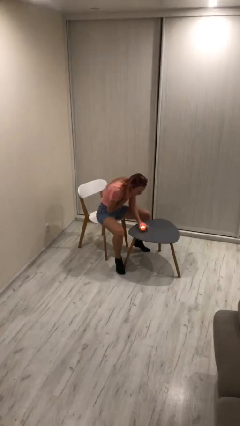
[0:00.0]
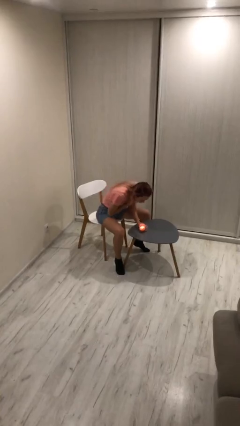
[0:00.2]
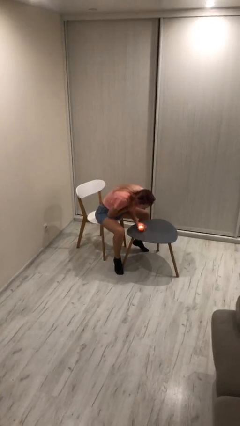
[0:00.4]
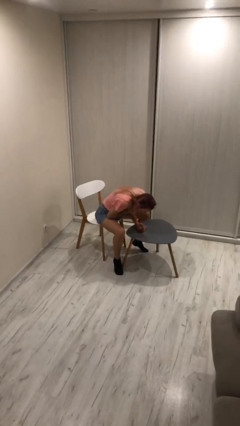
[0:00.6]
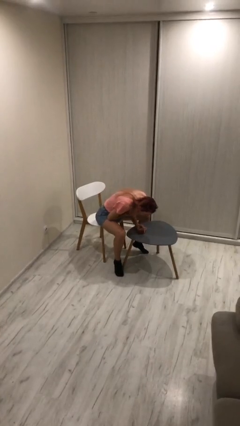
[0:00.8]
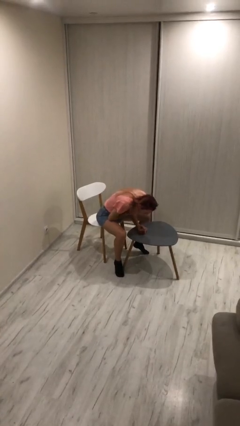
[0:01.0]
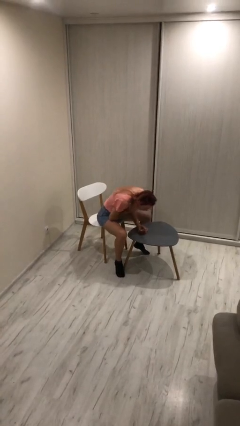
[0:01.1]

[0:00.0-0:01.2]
person extinguishes candle

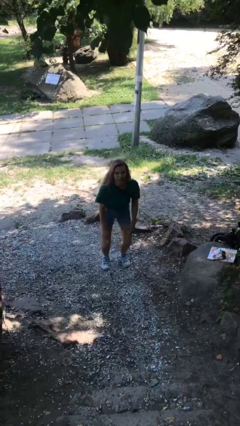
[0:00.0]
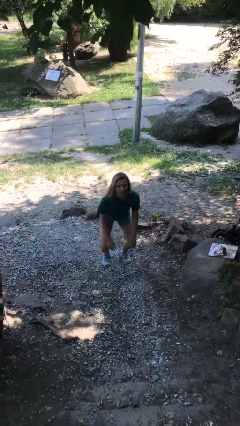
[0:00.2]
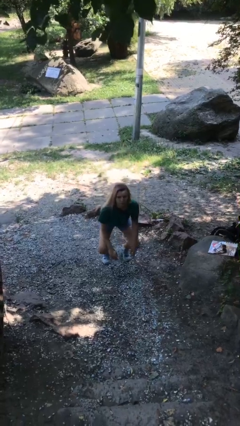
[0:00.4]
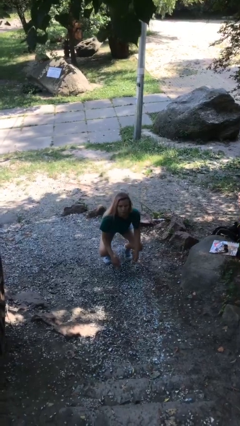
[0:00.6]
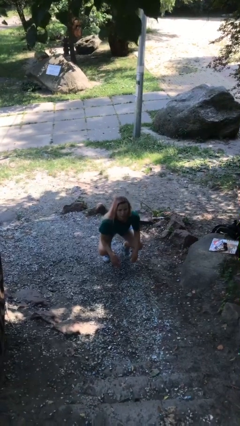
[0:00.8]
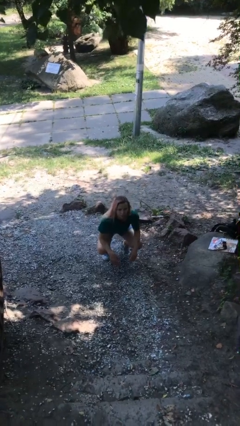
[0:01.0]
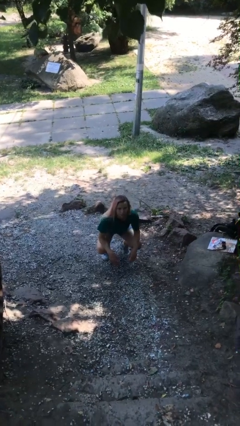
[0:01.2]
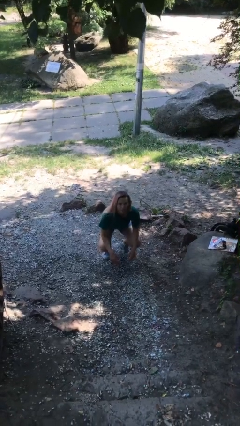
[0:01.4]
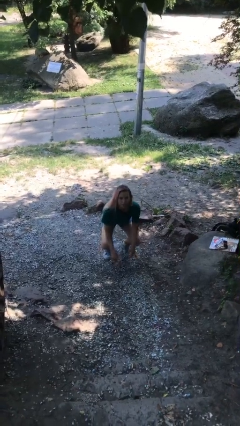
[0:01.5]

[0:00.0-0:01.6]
person squats

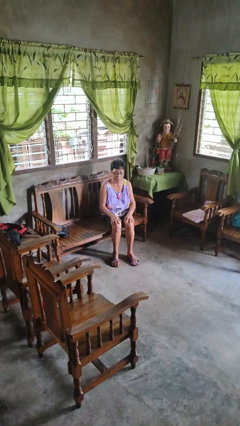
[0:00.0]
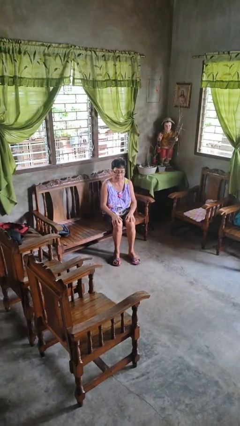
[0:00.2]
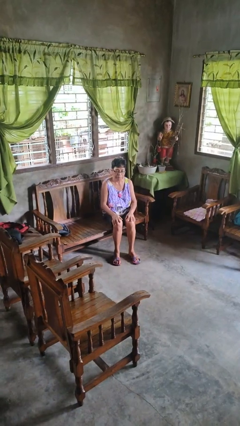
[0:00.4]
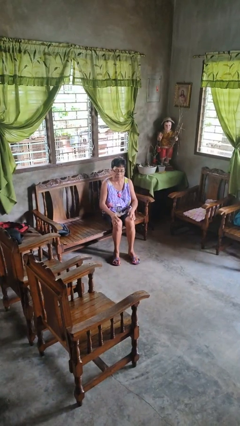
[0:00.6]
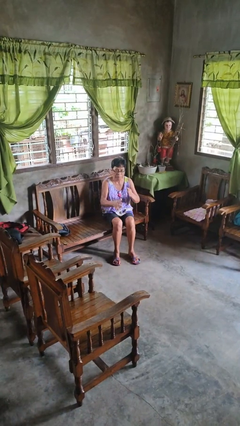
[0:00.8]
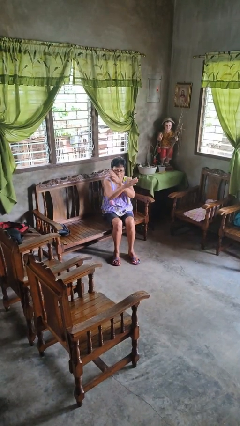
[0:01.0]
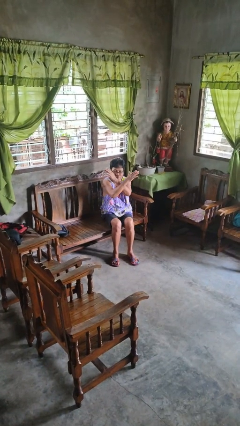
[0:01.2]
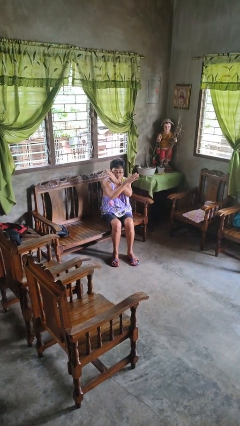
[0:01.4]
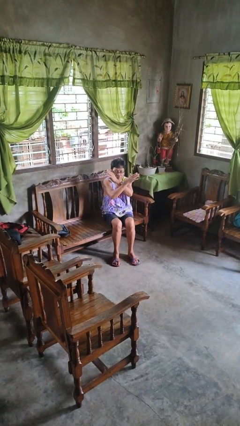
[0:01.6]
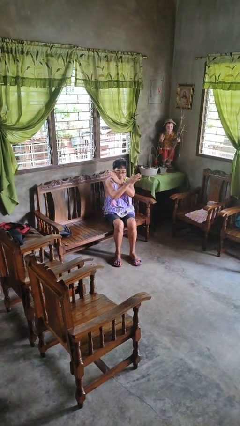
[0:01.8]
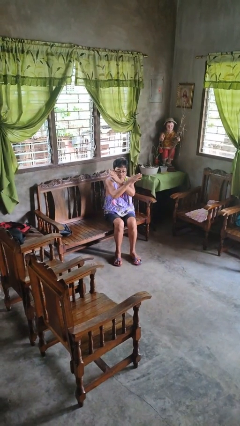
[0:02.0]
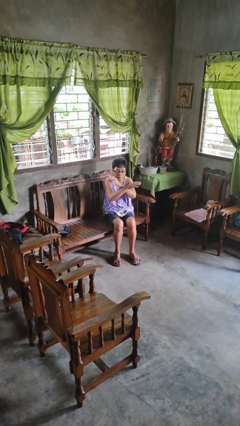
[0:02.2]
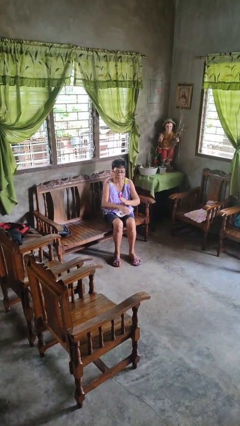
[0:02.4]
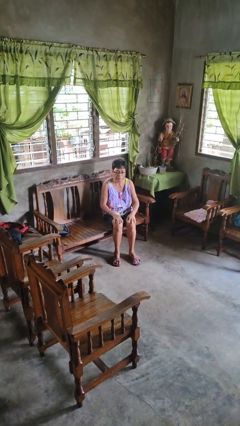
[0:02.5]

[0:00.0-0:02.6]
person gestures arms x

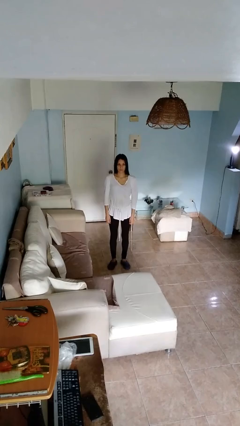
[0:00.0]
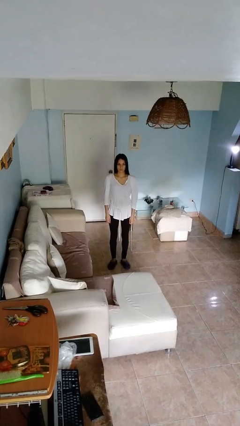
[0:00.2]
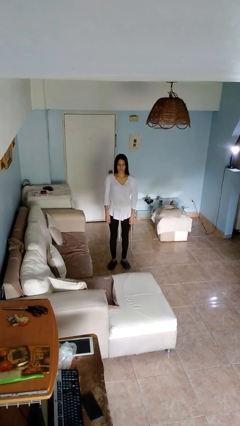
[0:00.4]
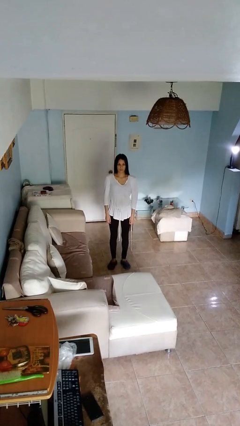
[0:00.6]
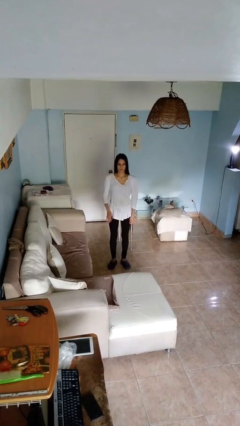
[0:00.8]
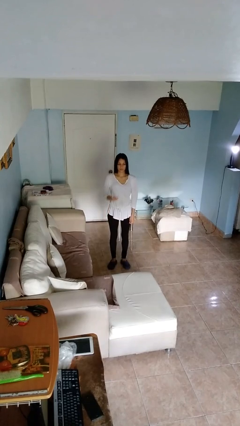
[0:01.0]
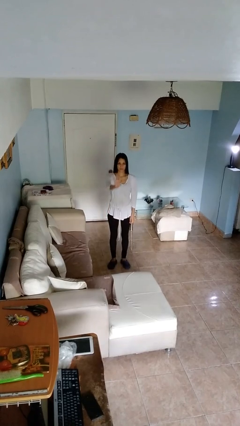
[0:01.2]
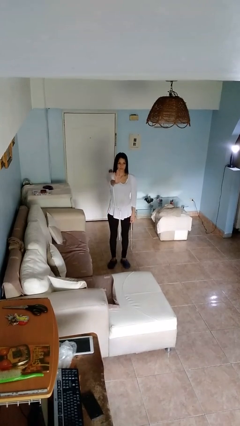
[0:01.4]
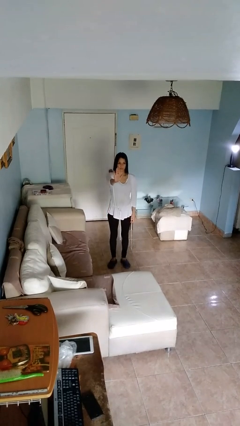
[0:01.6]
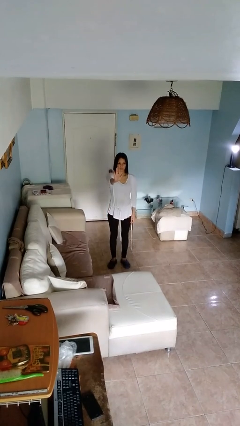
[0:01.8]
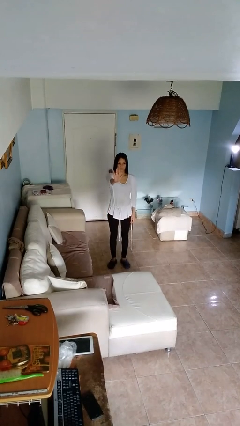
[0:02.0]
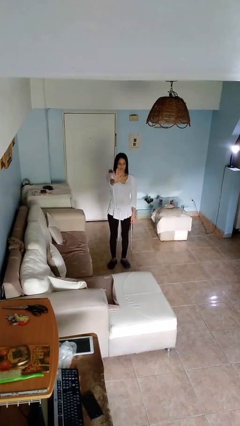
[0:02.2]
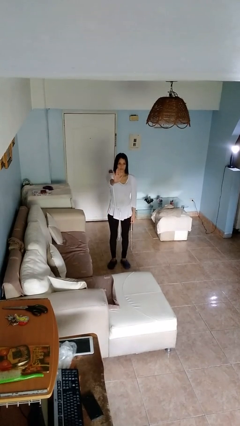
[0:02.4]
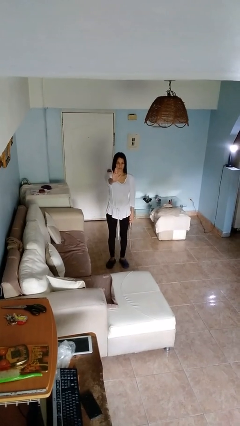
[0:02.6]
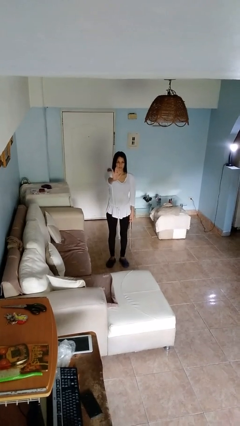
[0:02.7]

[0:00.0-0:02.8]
person gestures stop

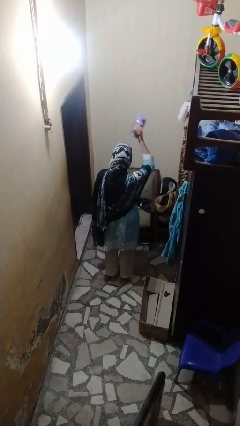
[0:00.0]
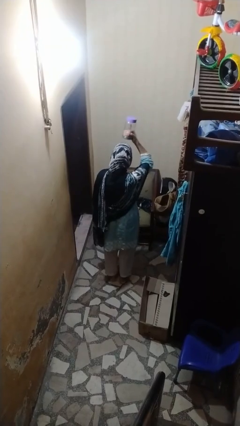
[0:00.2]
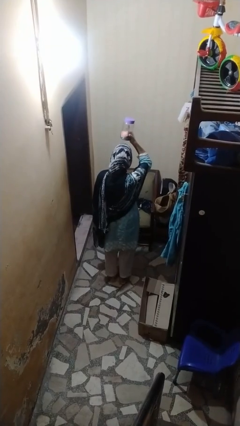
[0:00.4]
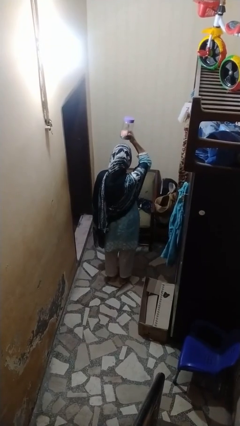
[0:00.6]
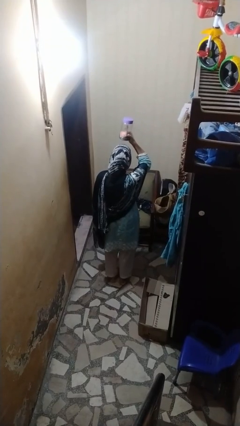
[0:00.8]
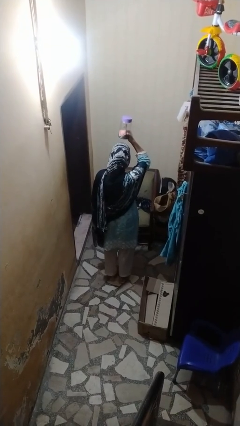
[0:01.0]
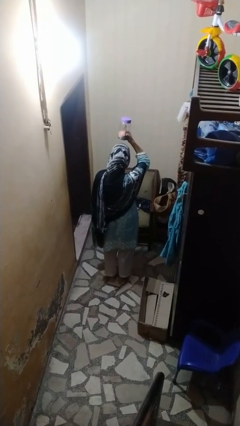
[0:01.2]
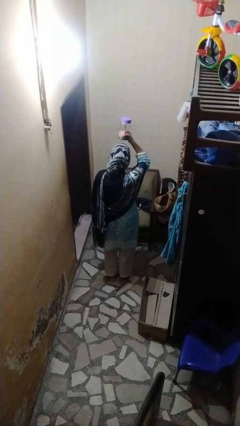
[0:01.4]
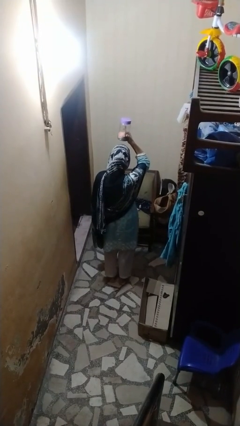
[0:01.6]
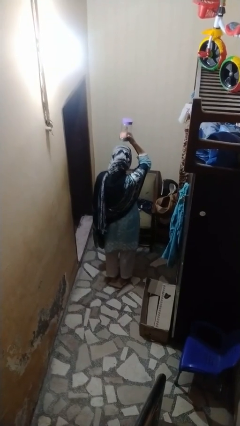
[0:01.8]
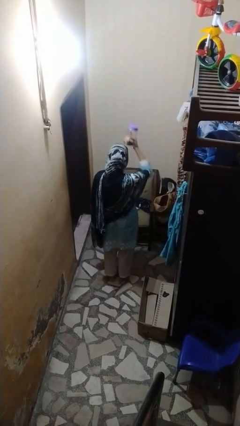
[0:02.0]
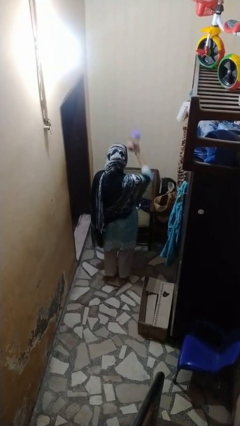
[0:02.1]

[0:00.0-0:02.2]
person holds object above head

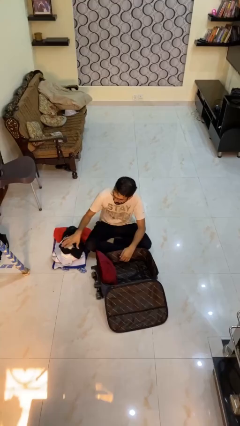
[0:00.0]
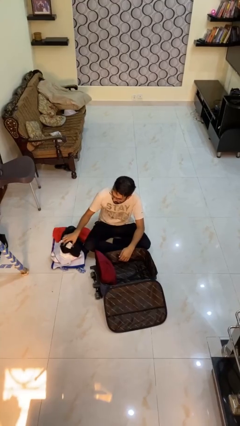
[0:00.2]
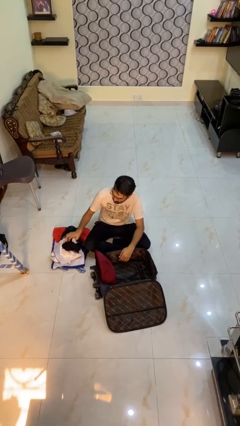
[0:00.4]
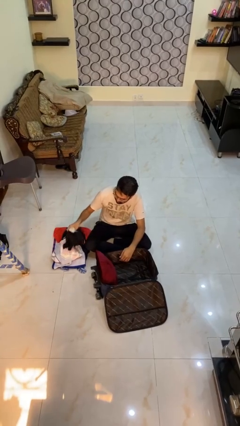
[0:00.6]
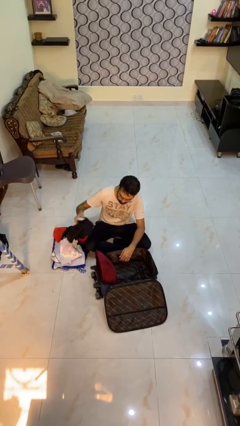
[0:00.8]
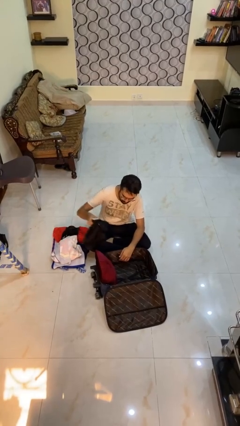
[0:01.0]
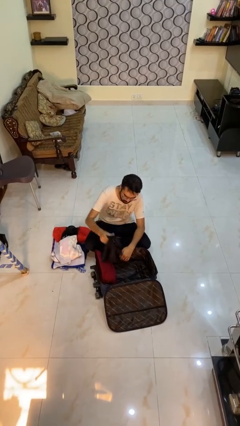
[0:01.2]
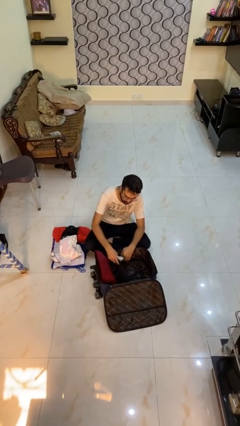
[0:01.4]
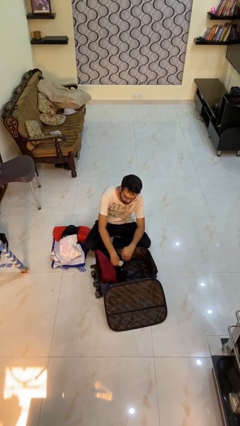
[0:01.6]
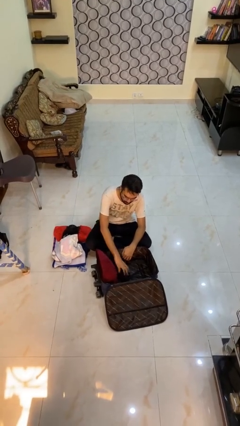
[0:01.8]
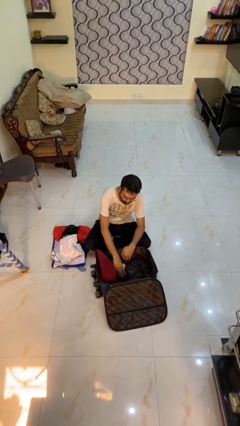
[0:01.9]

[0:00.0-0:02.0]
person loads clothes into suitcase

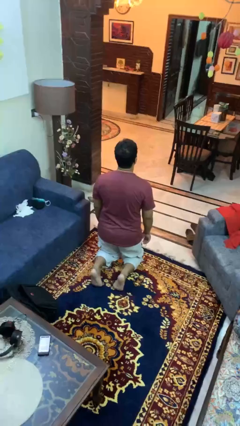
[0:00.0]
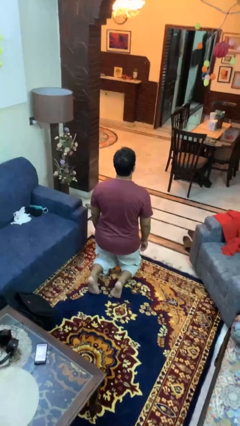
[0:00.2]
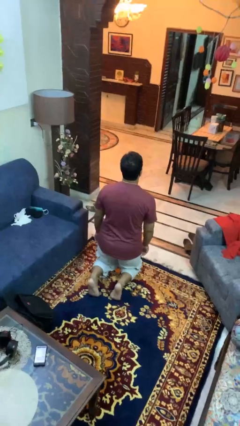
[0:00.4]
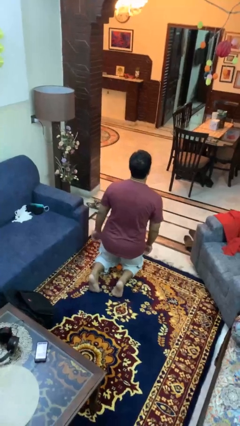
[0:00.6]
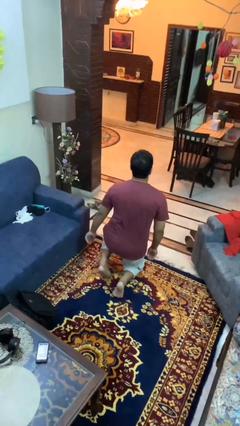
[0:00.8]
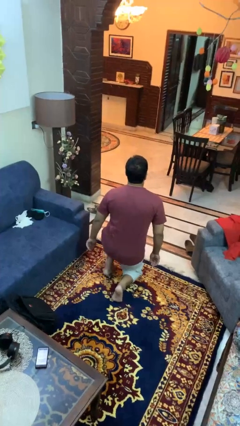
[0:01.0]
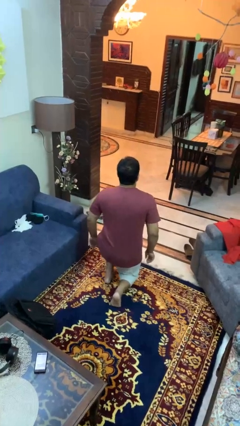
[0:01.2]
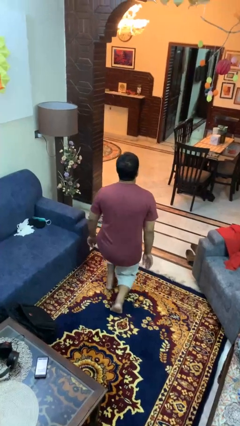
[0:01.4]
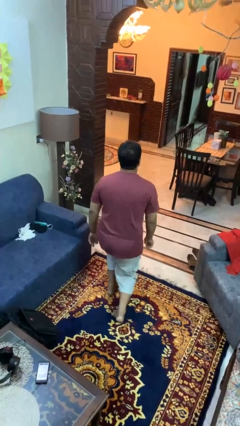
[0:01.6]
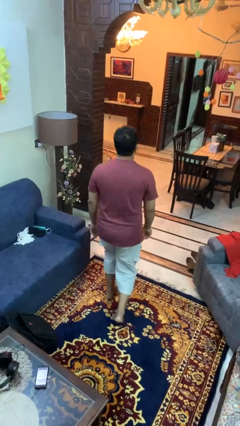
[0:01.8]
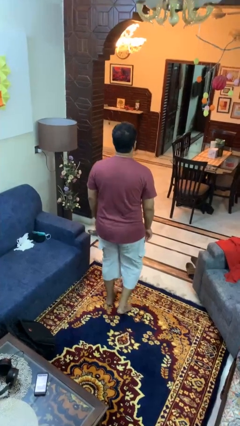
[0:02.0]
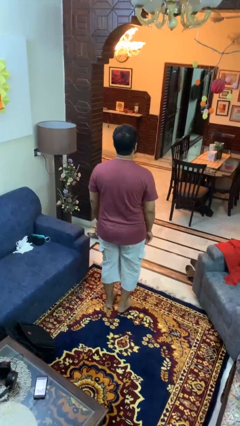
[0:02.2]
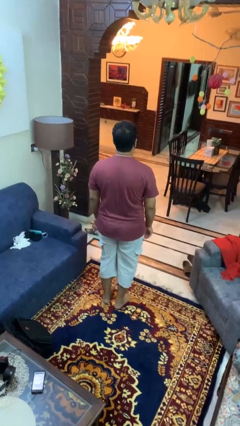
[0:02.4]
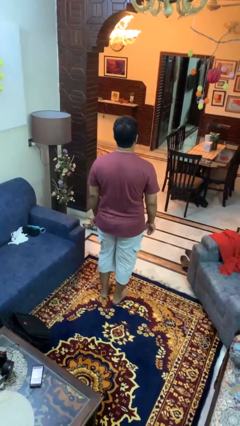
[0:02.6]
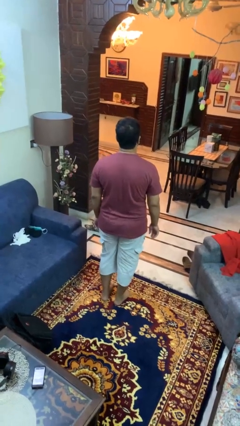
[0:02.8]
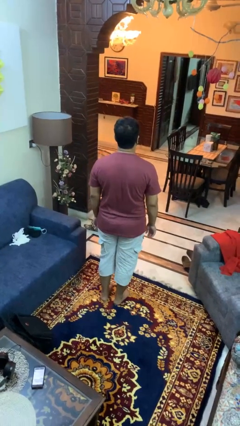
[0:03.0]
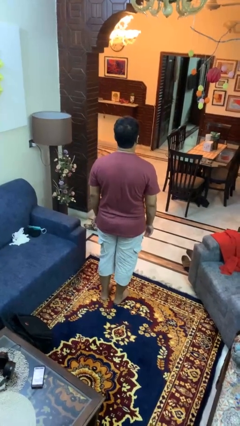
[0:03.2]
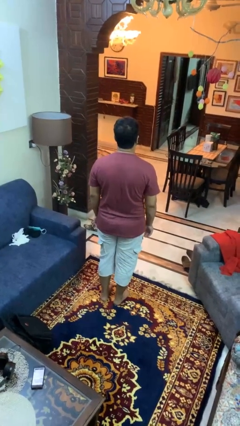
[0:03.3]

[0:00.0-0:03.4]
person stands up from floor

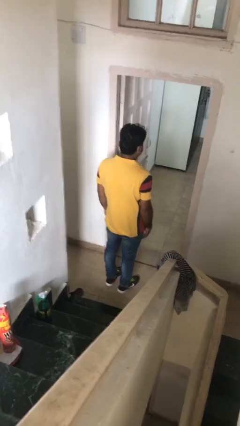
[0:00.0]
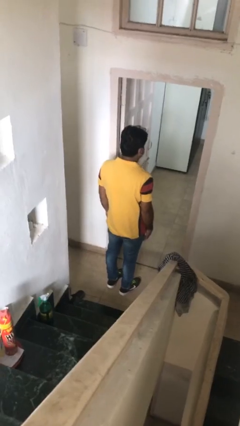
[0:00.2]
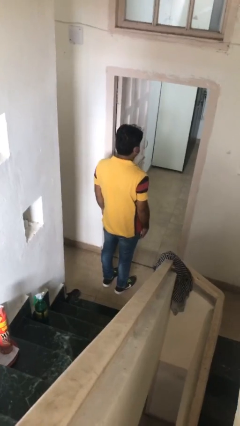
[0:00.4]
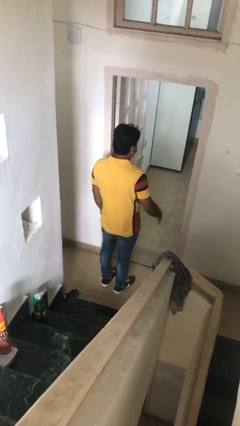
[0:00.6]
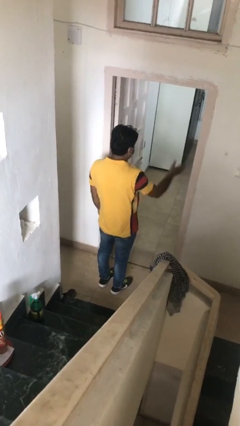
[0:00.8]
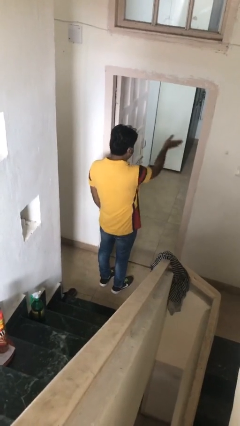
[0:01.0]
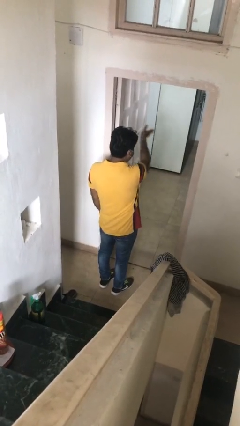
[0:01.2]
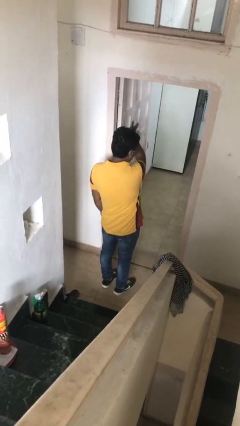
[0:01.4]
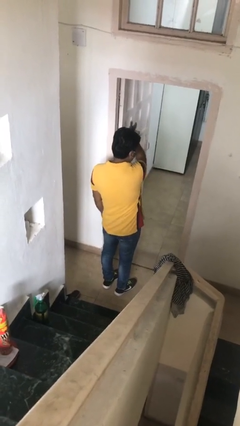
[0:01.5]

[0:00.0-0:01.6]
person gestures swipe left
